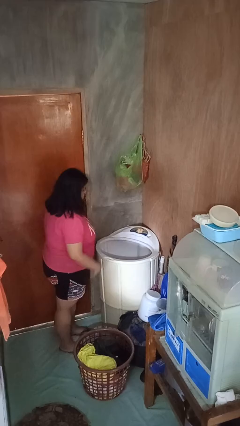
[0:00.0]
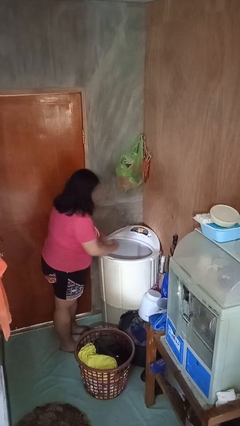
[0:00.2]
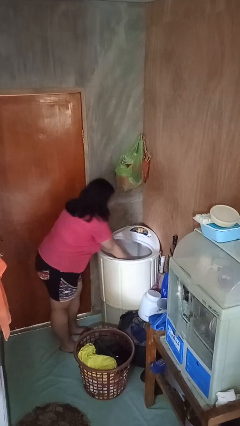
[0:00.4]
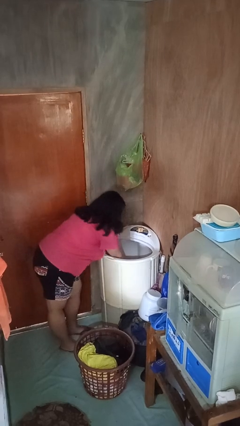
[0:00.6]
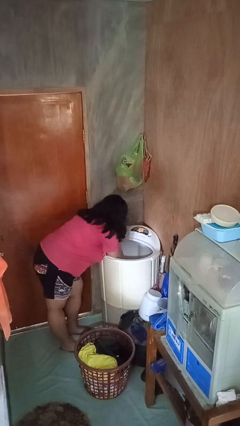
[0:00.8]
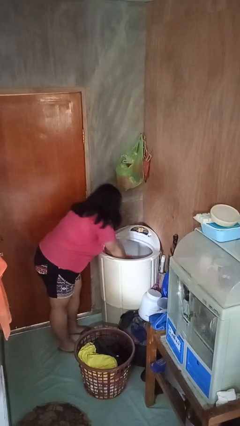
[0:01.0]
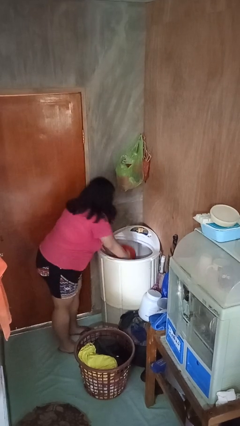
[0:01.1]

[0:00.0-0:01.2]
person unloads dryer

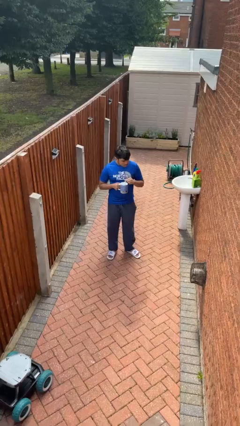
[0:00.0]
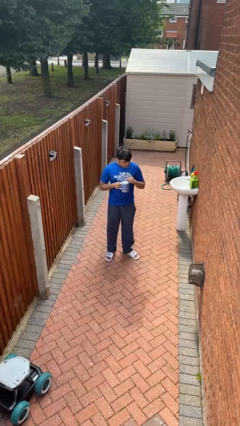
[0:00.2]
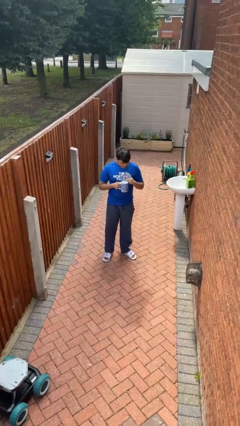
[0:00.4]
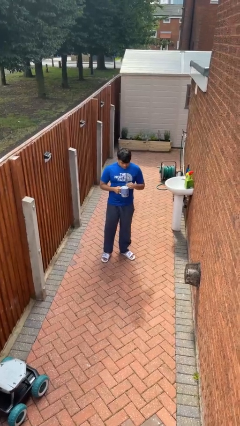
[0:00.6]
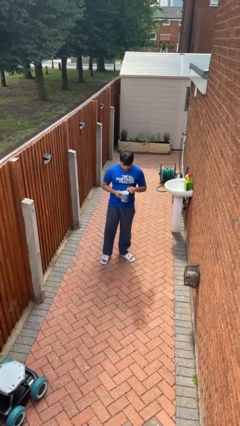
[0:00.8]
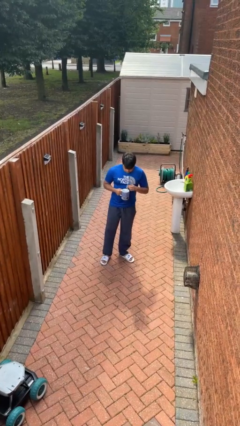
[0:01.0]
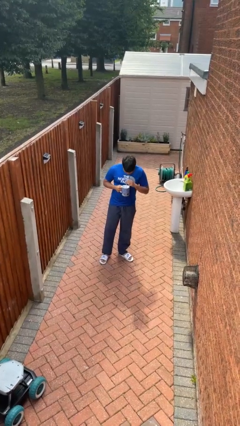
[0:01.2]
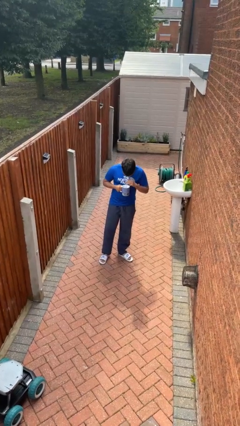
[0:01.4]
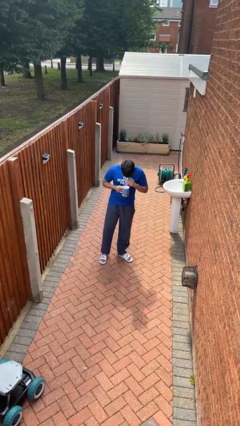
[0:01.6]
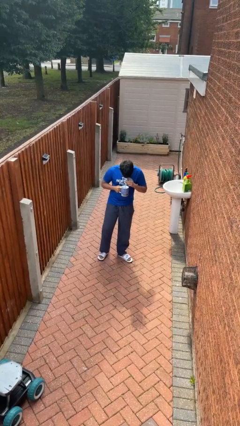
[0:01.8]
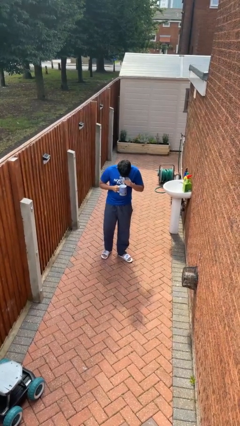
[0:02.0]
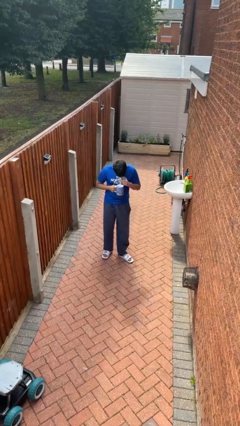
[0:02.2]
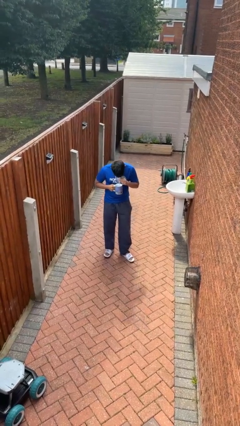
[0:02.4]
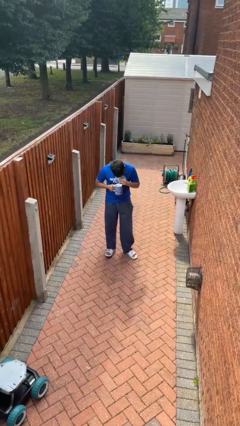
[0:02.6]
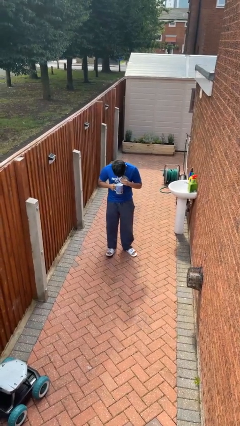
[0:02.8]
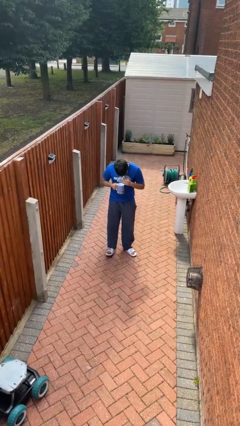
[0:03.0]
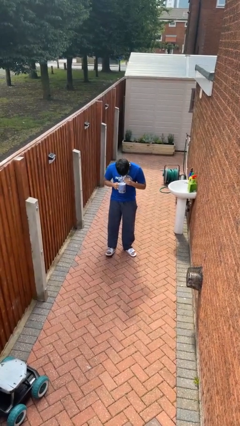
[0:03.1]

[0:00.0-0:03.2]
person drinks from straw

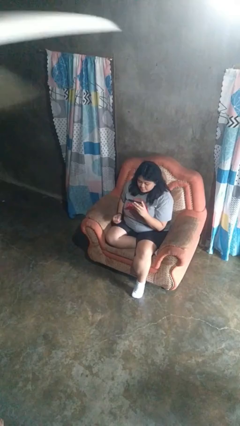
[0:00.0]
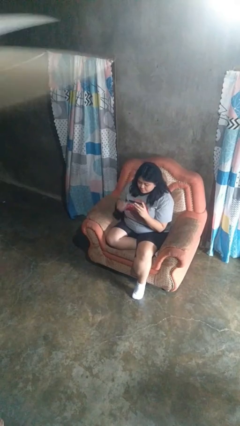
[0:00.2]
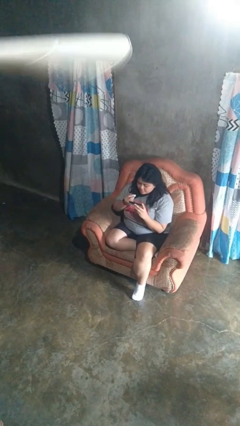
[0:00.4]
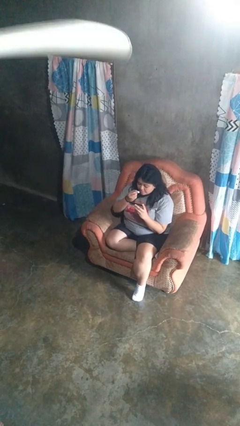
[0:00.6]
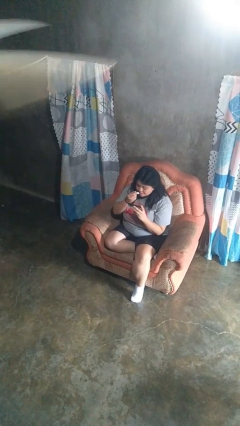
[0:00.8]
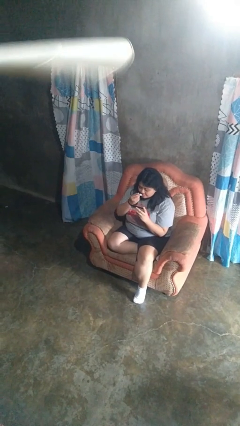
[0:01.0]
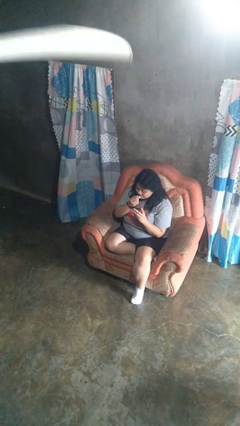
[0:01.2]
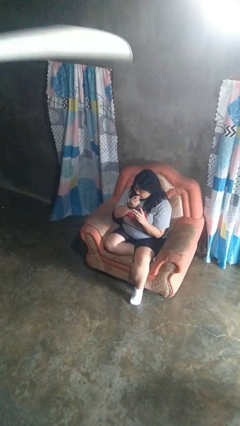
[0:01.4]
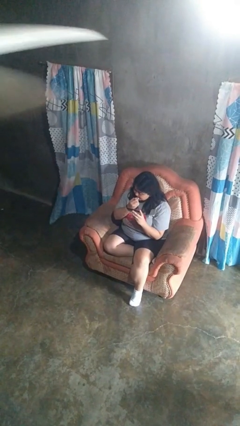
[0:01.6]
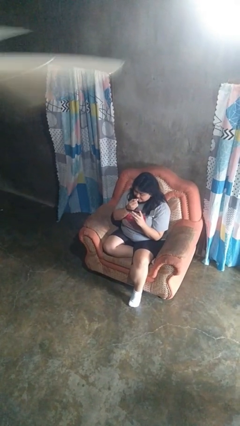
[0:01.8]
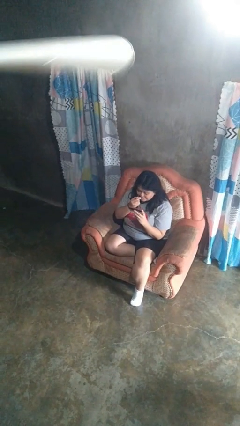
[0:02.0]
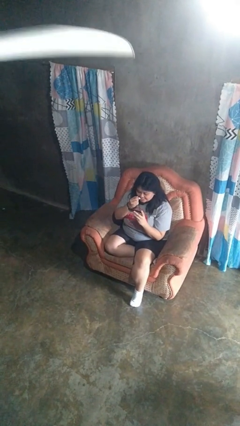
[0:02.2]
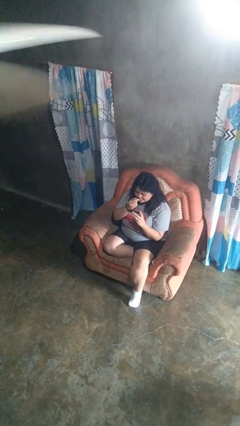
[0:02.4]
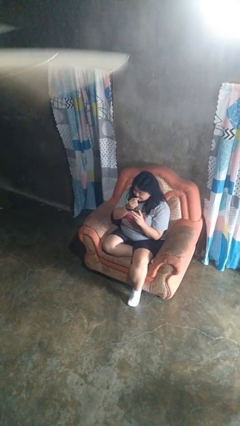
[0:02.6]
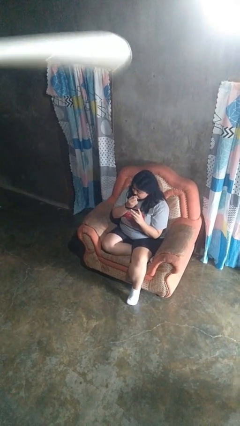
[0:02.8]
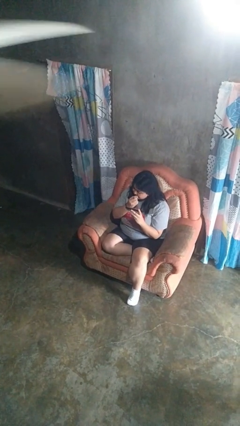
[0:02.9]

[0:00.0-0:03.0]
person applies lip makeup

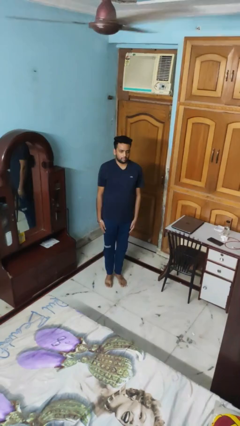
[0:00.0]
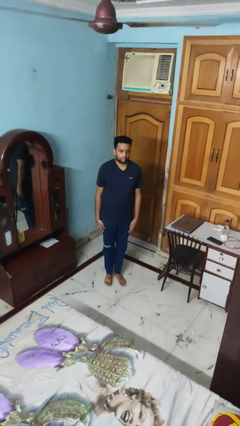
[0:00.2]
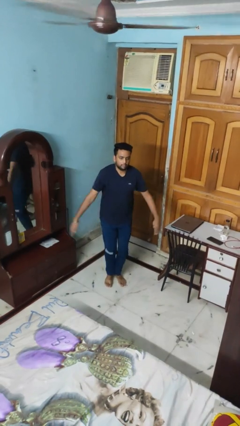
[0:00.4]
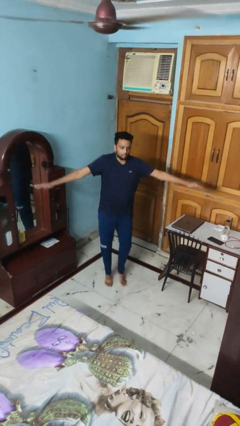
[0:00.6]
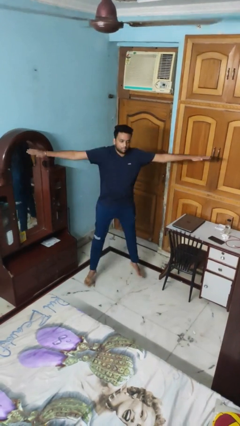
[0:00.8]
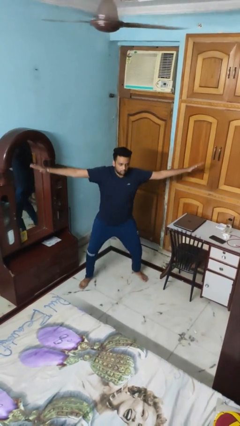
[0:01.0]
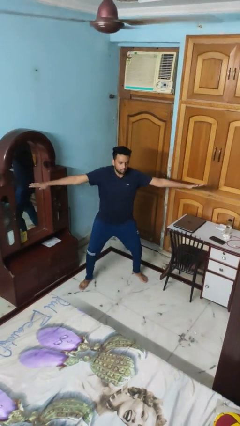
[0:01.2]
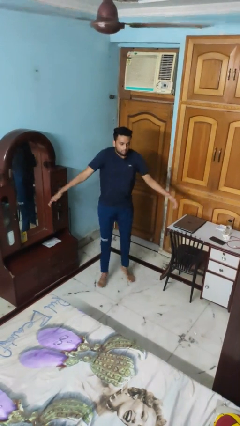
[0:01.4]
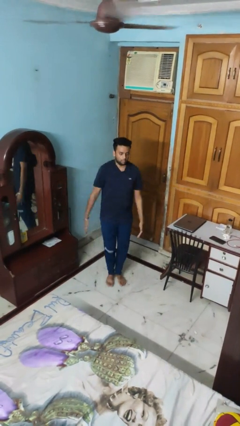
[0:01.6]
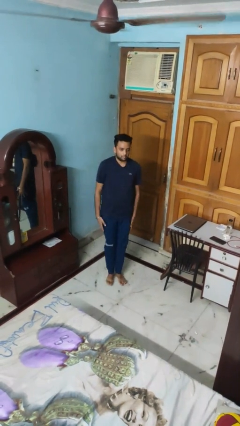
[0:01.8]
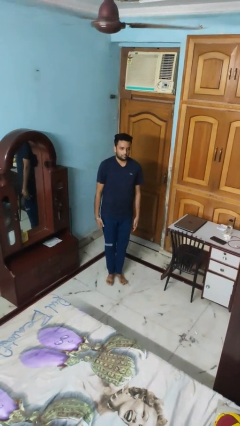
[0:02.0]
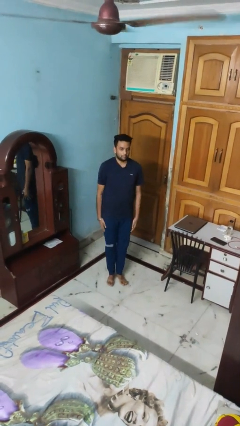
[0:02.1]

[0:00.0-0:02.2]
person exercises with jumping jacks

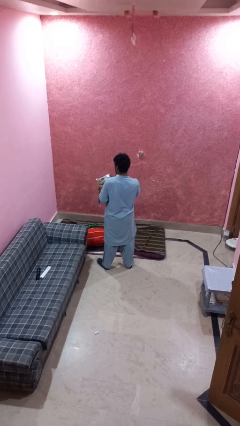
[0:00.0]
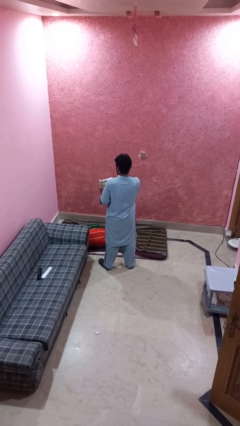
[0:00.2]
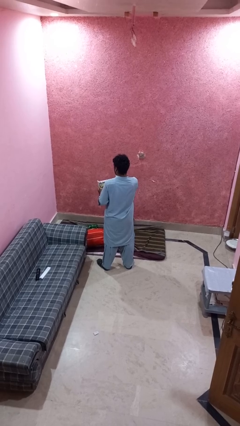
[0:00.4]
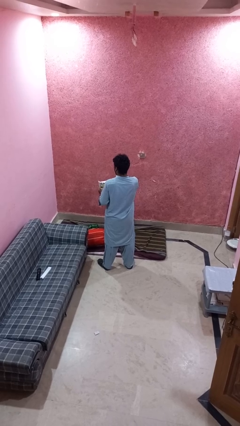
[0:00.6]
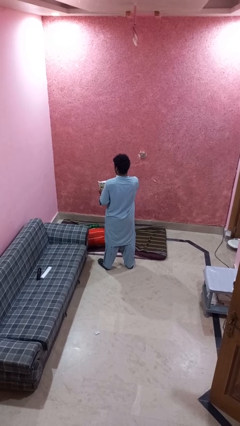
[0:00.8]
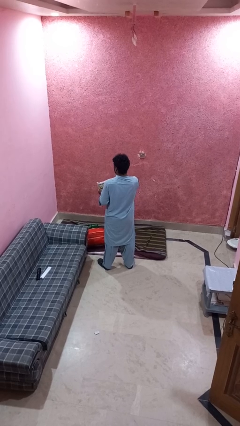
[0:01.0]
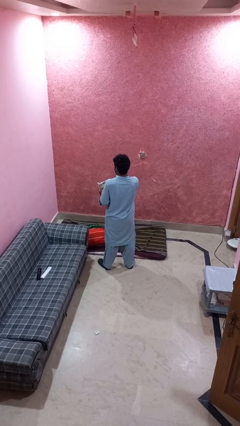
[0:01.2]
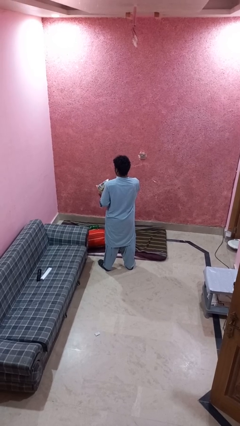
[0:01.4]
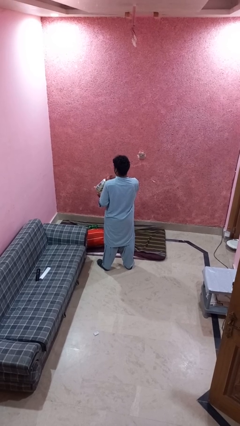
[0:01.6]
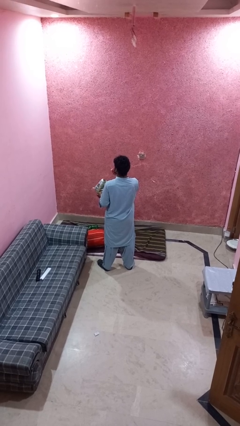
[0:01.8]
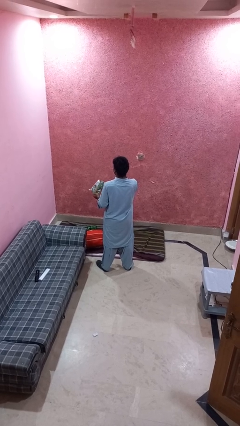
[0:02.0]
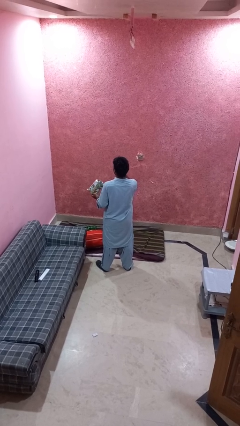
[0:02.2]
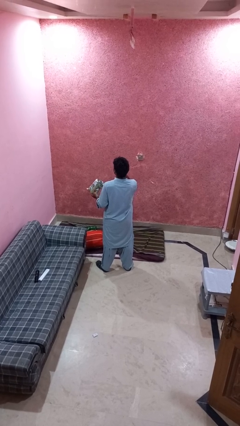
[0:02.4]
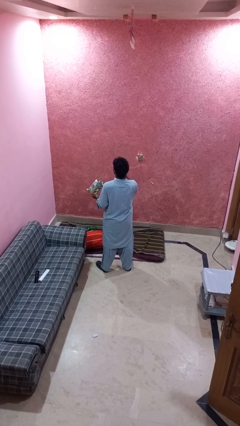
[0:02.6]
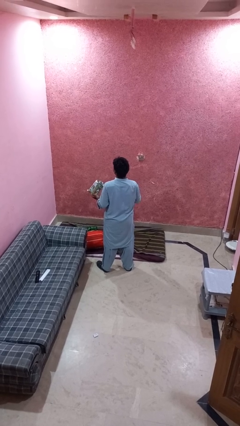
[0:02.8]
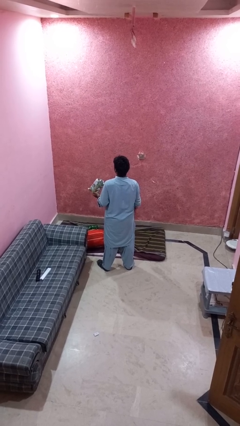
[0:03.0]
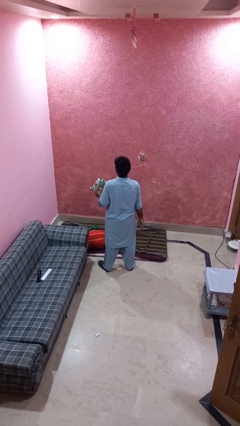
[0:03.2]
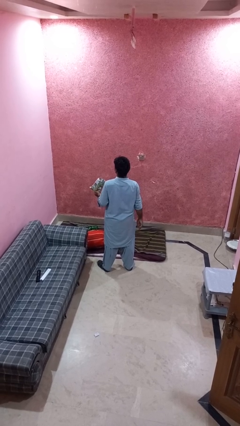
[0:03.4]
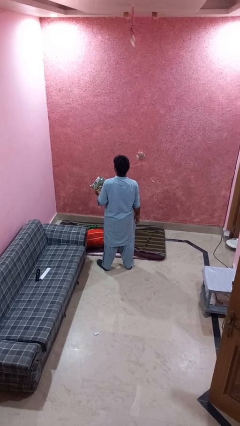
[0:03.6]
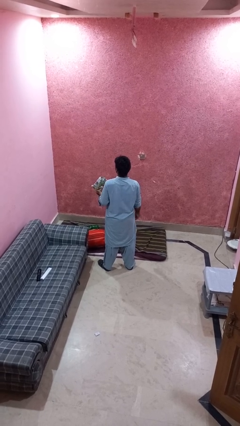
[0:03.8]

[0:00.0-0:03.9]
person eats snack from bag

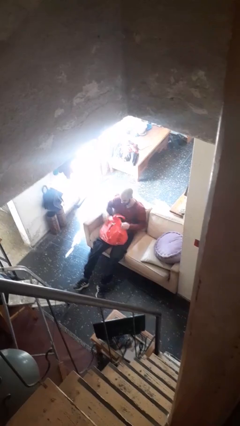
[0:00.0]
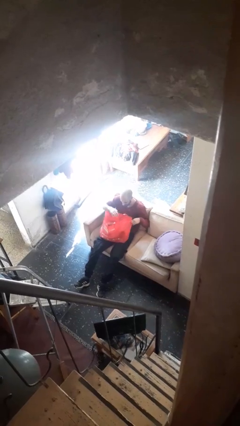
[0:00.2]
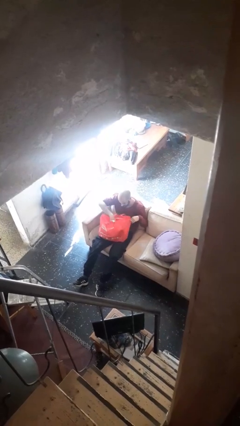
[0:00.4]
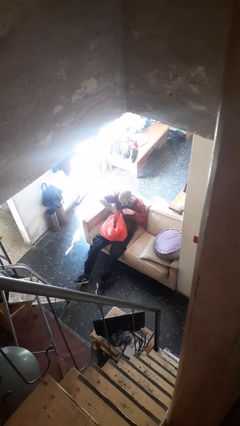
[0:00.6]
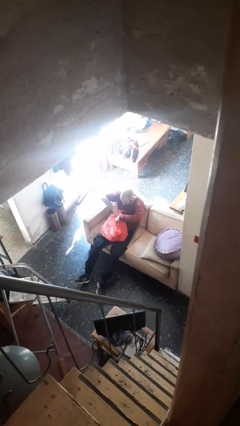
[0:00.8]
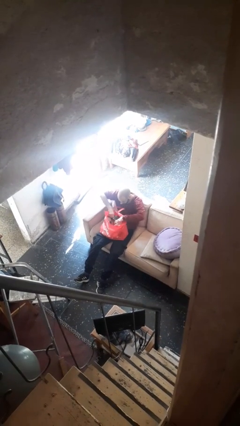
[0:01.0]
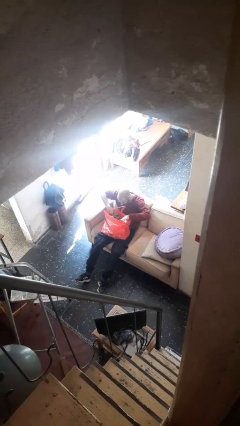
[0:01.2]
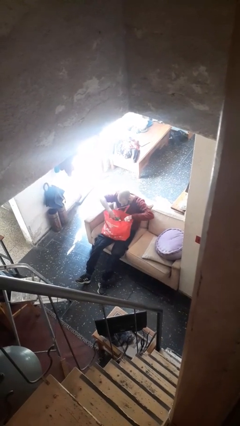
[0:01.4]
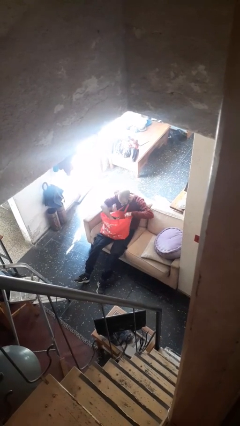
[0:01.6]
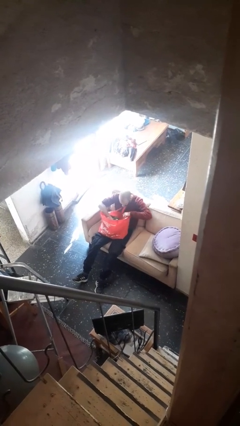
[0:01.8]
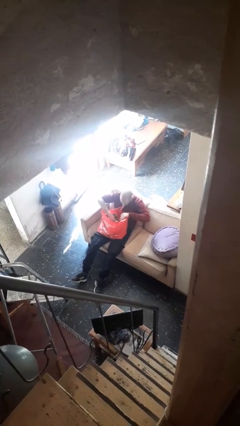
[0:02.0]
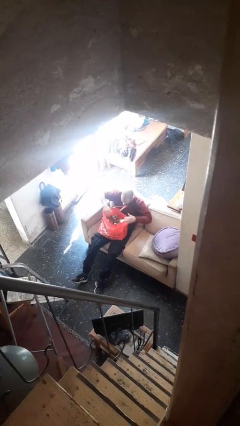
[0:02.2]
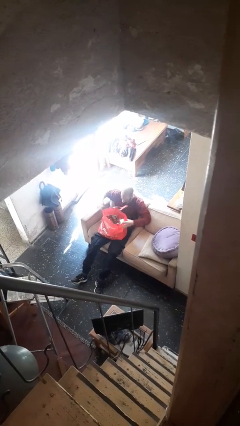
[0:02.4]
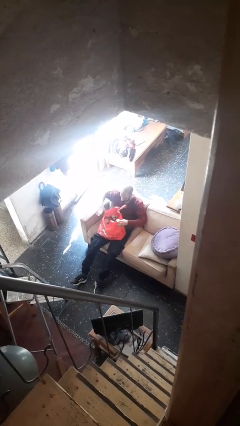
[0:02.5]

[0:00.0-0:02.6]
person searches in bag

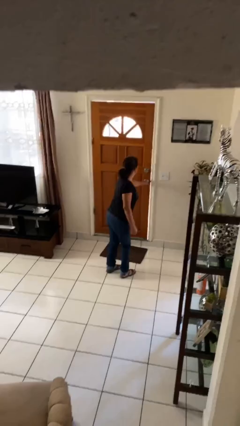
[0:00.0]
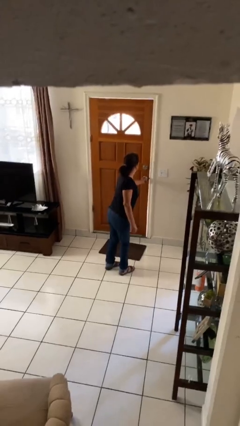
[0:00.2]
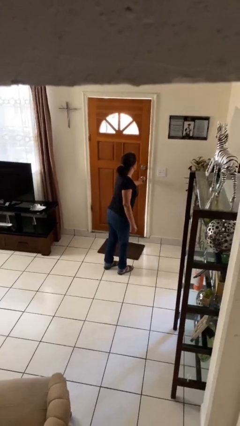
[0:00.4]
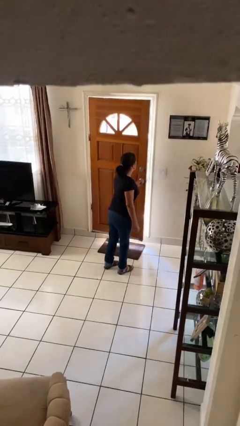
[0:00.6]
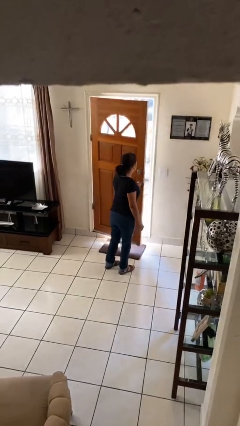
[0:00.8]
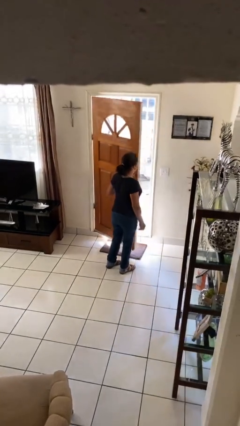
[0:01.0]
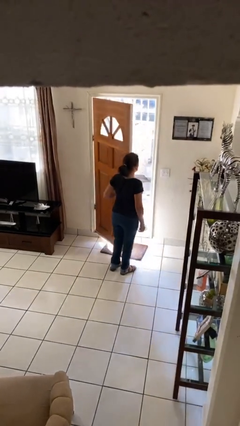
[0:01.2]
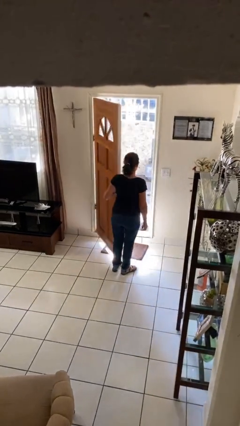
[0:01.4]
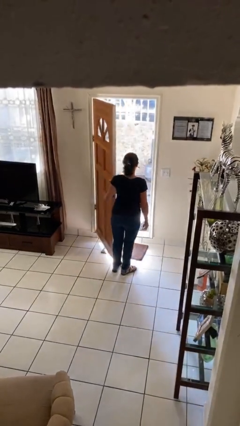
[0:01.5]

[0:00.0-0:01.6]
person opens facility door
